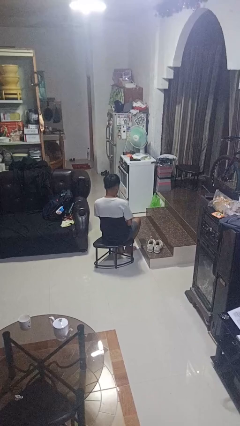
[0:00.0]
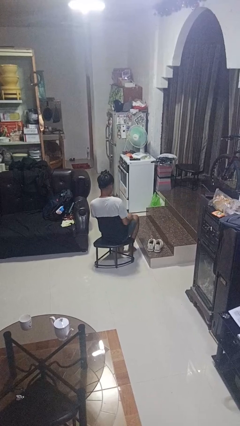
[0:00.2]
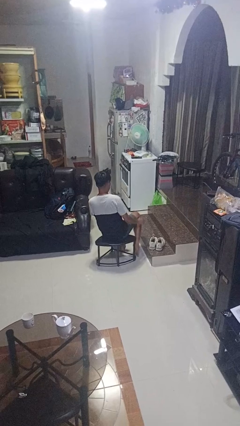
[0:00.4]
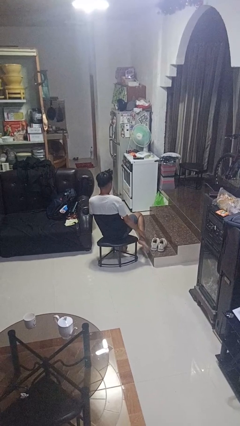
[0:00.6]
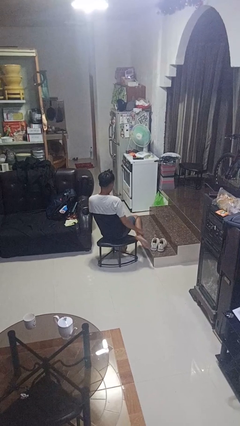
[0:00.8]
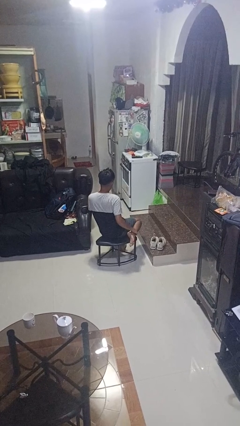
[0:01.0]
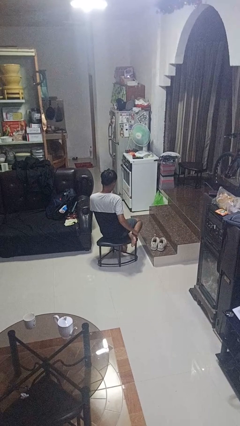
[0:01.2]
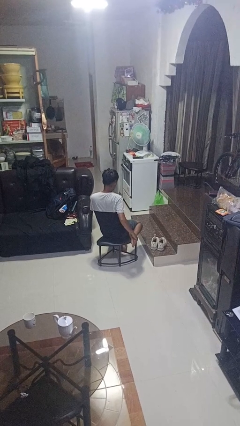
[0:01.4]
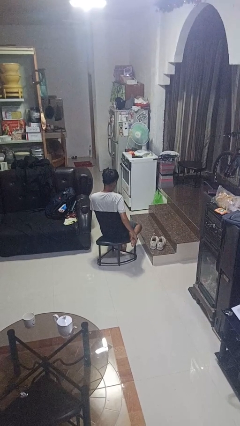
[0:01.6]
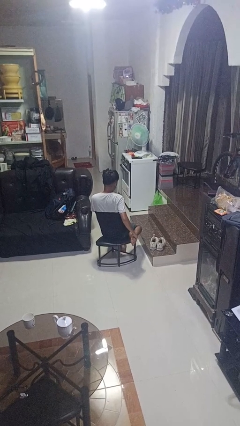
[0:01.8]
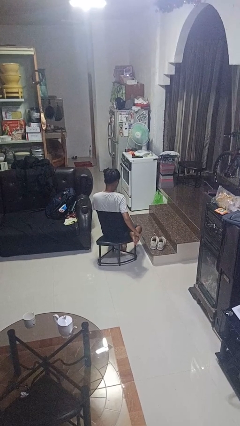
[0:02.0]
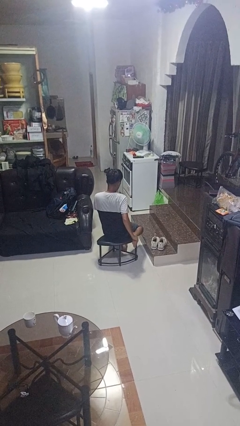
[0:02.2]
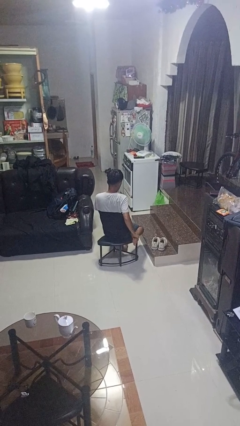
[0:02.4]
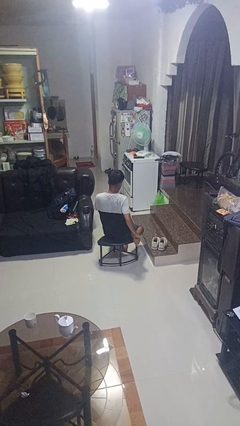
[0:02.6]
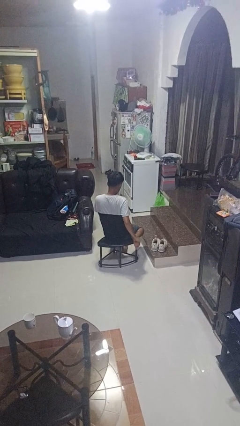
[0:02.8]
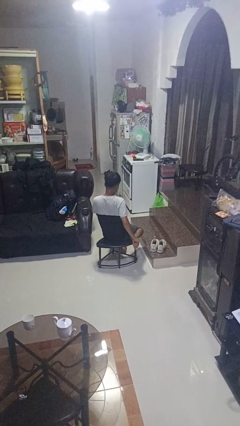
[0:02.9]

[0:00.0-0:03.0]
person rubs foot

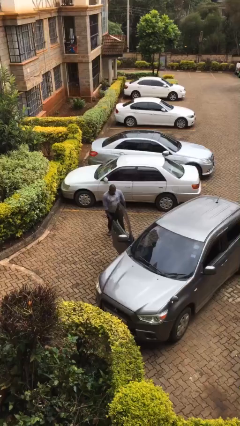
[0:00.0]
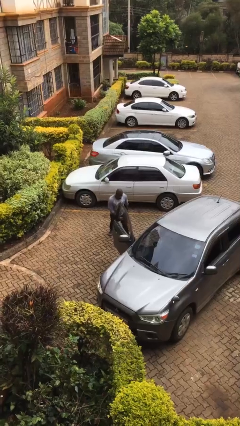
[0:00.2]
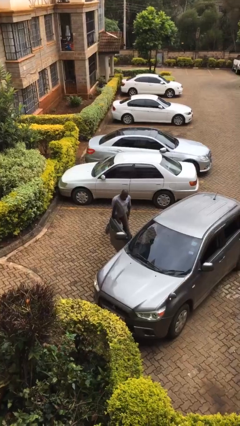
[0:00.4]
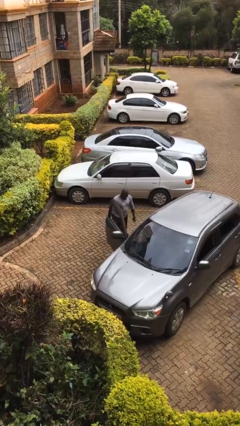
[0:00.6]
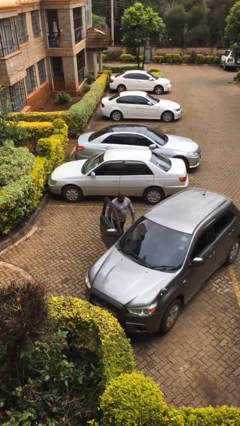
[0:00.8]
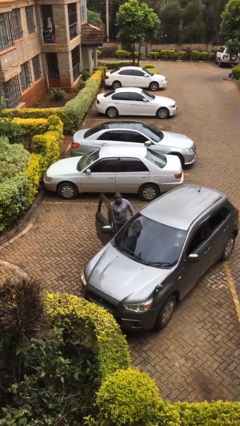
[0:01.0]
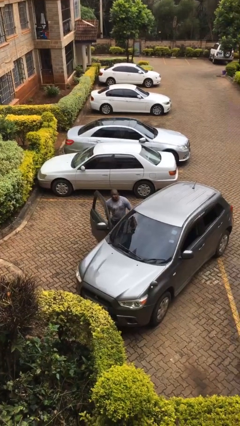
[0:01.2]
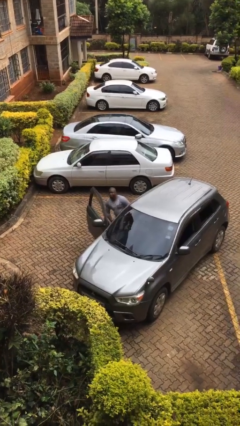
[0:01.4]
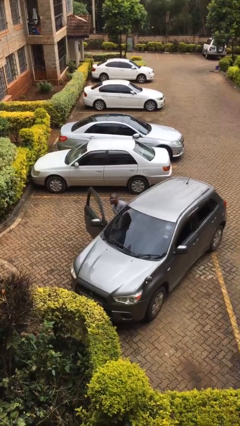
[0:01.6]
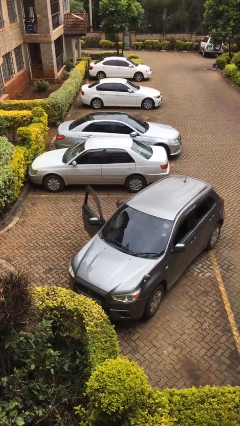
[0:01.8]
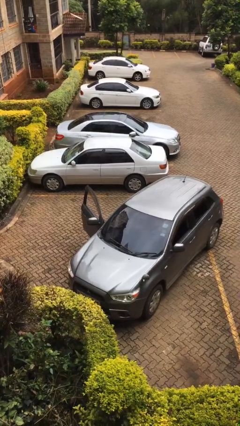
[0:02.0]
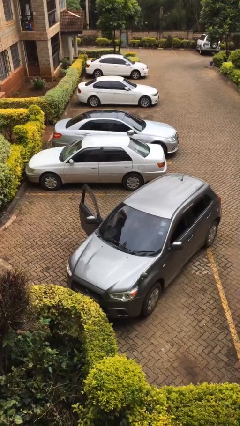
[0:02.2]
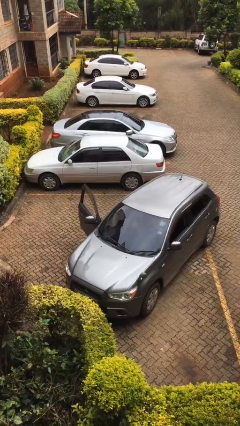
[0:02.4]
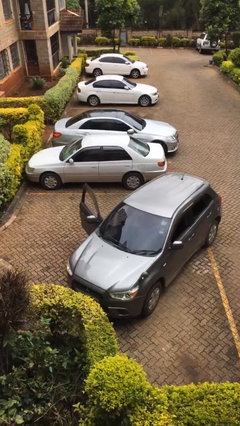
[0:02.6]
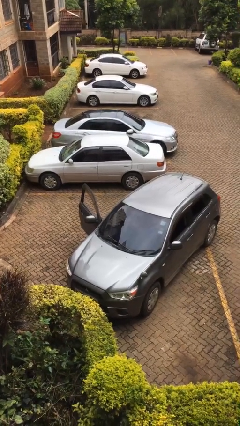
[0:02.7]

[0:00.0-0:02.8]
person enters car

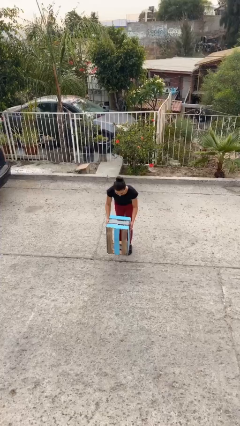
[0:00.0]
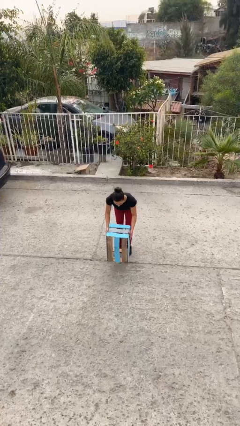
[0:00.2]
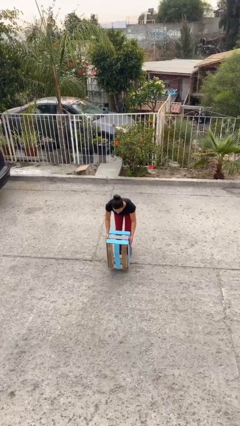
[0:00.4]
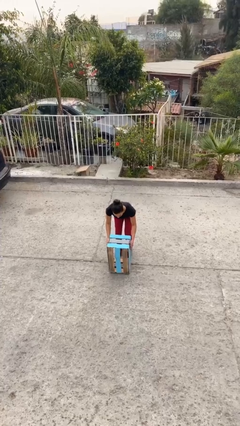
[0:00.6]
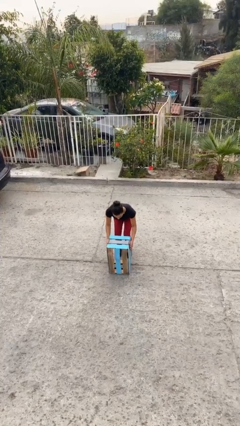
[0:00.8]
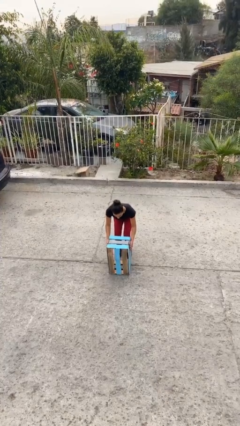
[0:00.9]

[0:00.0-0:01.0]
person puts down object on floor

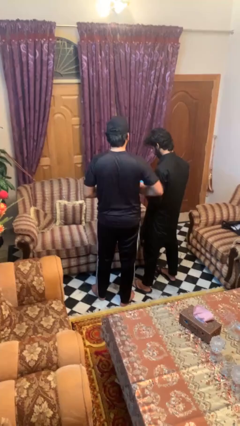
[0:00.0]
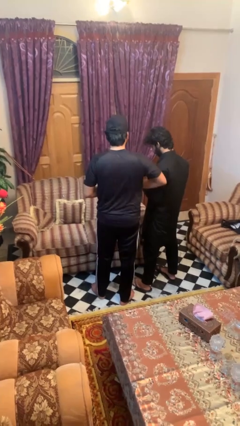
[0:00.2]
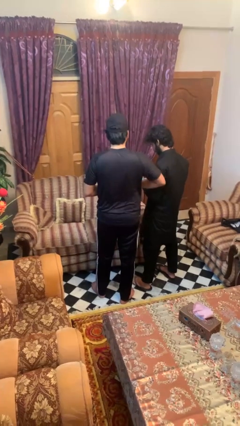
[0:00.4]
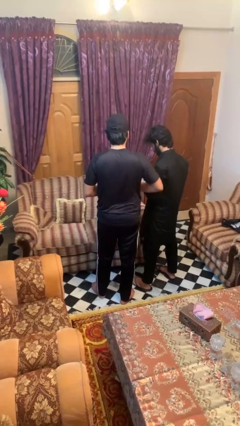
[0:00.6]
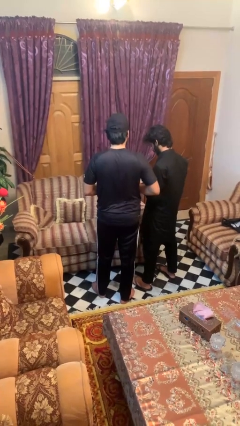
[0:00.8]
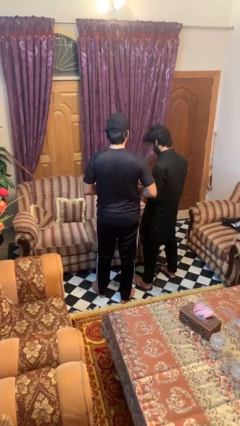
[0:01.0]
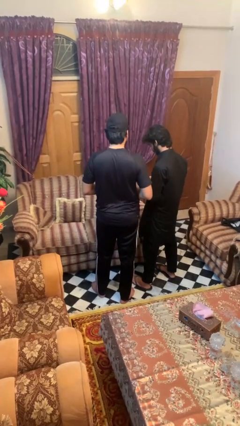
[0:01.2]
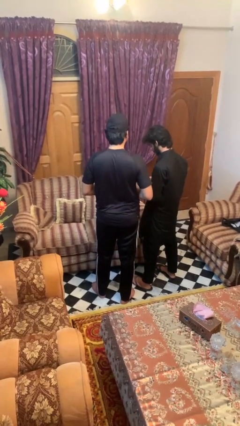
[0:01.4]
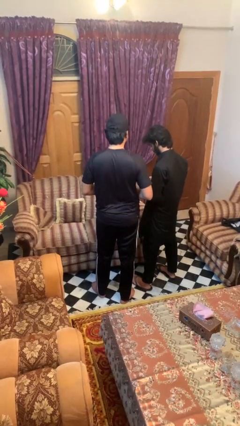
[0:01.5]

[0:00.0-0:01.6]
person nudges person with elbow

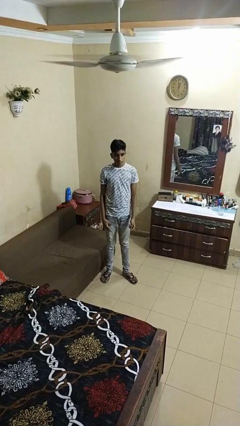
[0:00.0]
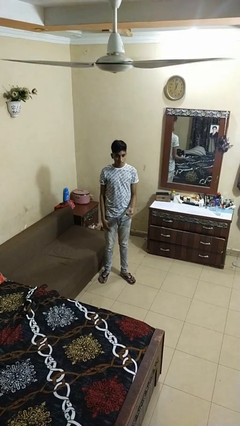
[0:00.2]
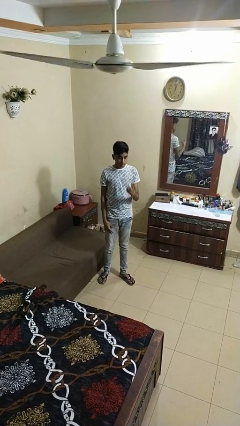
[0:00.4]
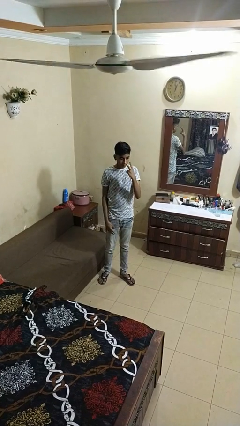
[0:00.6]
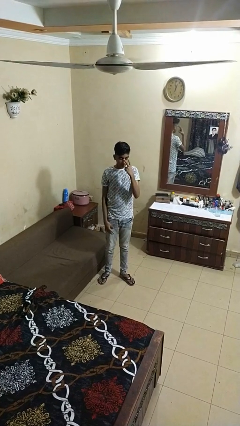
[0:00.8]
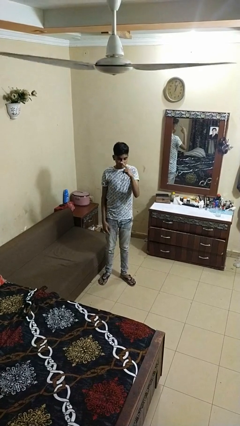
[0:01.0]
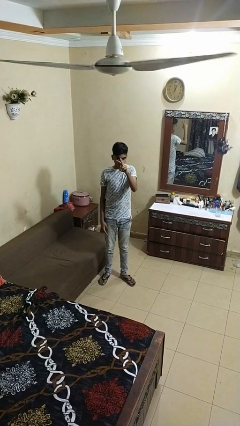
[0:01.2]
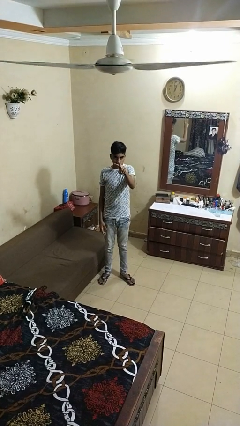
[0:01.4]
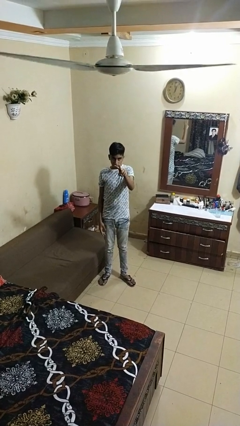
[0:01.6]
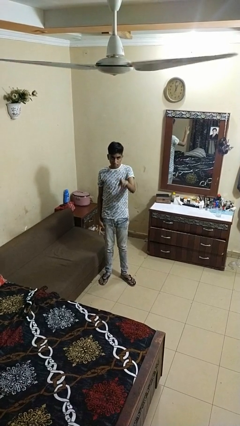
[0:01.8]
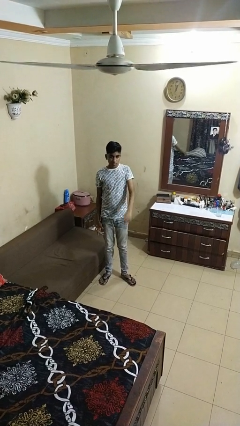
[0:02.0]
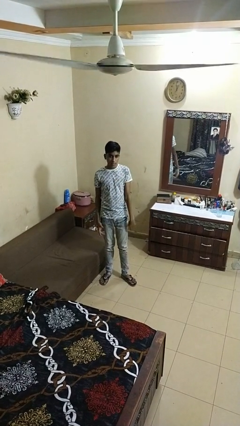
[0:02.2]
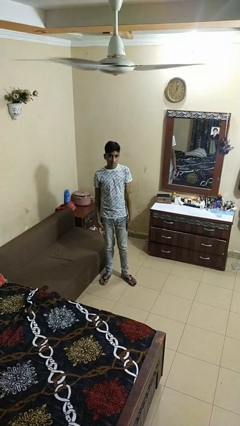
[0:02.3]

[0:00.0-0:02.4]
person gestures watch closely

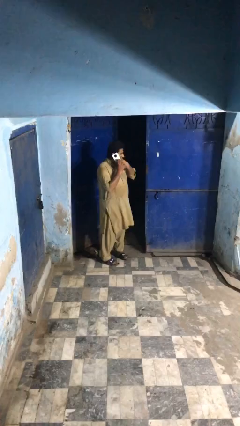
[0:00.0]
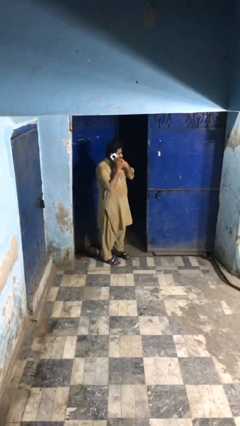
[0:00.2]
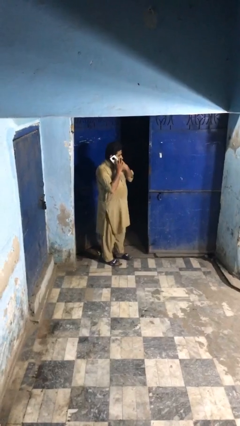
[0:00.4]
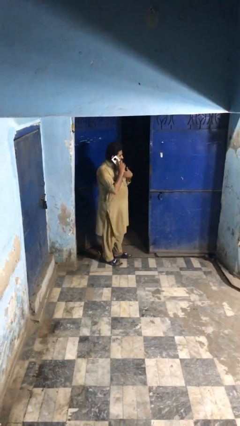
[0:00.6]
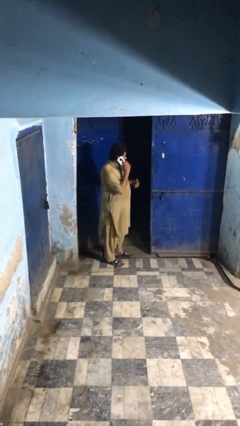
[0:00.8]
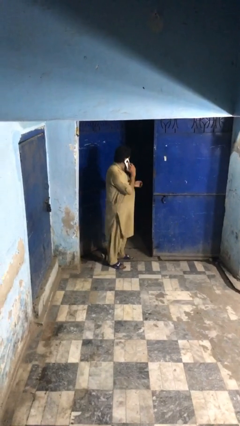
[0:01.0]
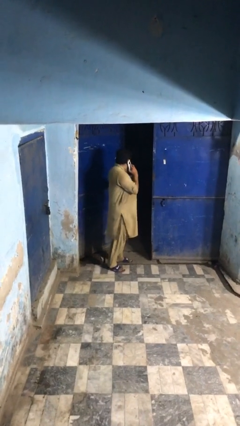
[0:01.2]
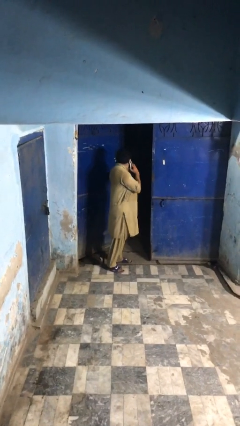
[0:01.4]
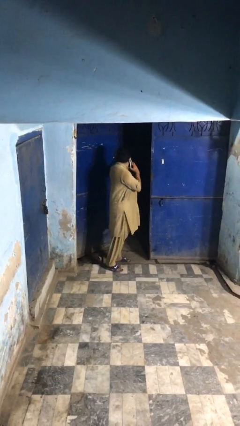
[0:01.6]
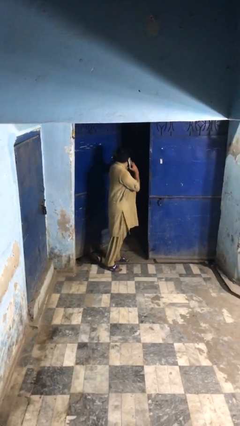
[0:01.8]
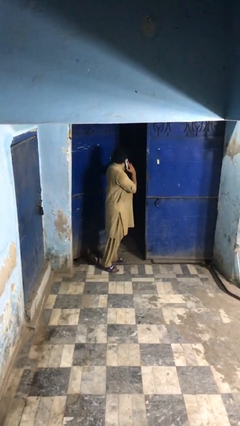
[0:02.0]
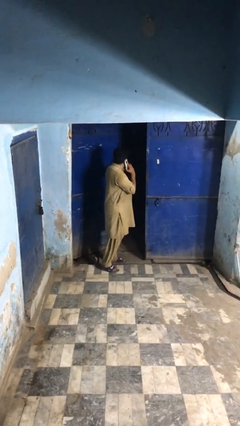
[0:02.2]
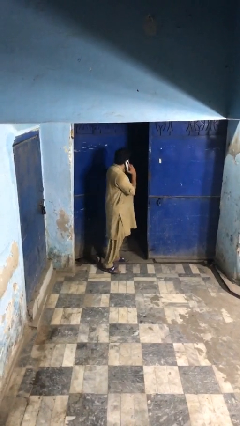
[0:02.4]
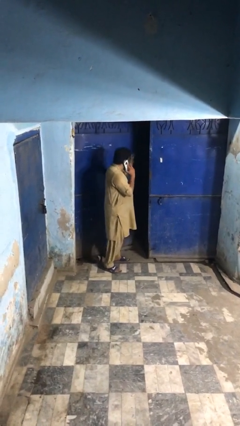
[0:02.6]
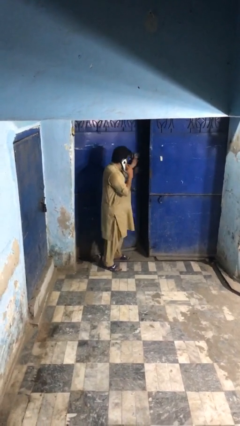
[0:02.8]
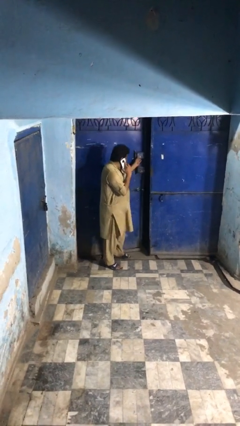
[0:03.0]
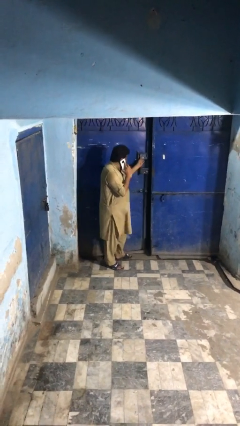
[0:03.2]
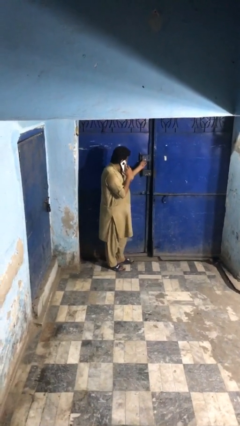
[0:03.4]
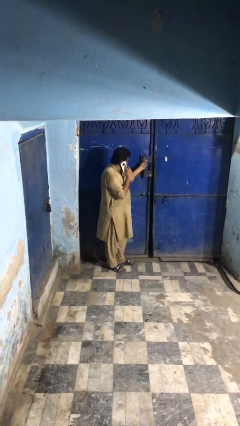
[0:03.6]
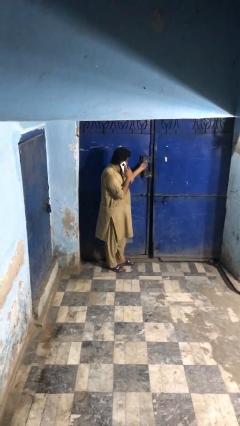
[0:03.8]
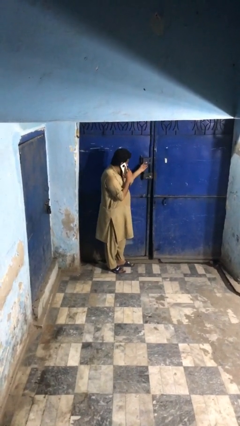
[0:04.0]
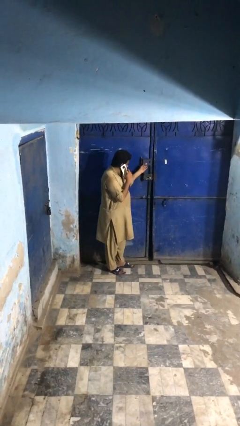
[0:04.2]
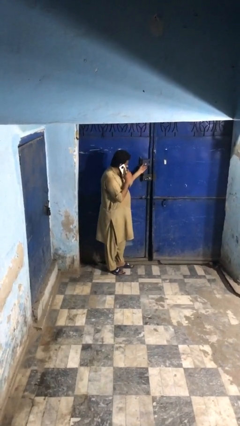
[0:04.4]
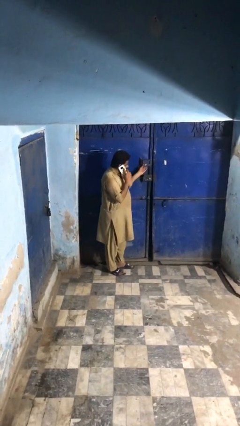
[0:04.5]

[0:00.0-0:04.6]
person closes facility door

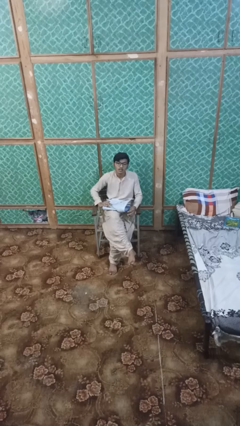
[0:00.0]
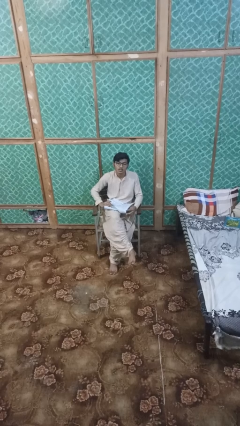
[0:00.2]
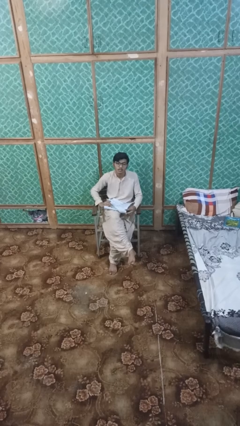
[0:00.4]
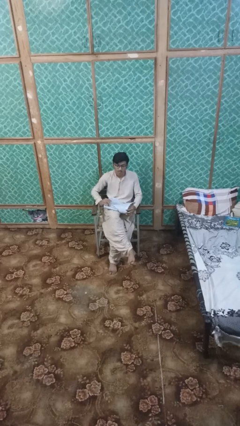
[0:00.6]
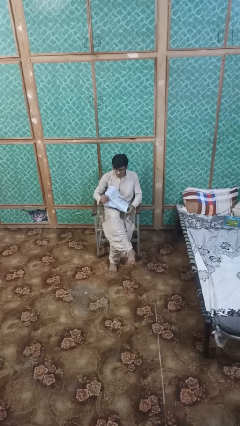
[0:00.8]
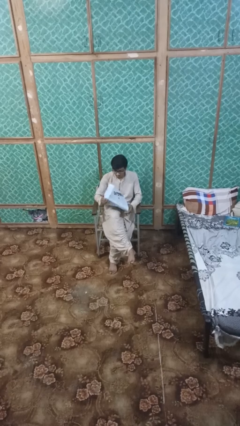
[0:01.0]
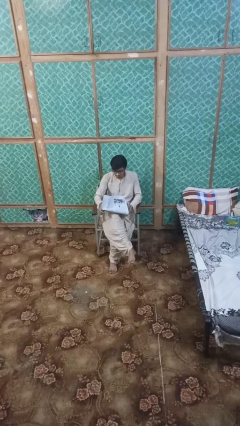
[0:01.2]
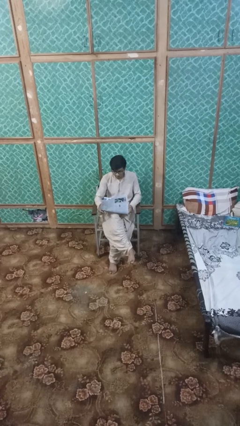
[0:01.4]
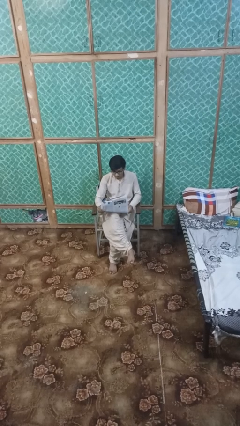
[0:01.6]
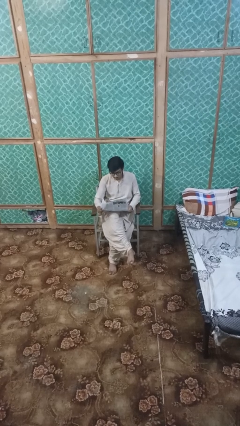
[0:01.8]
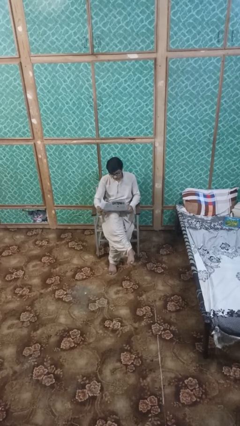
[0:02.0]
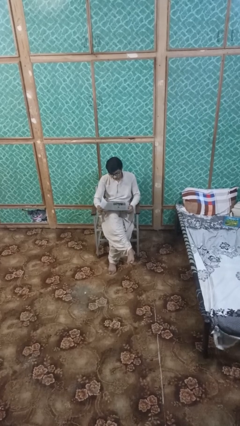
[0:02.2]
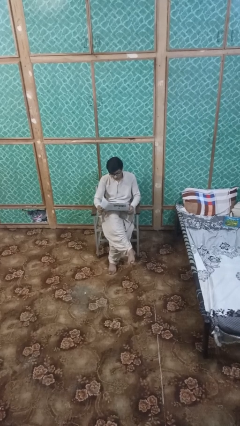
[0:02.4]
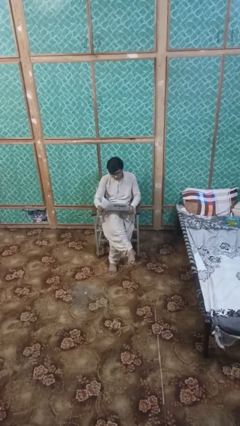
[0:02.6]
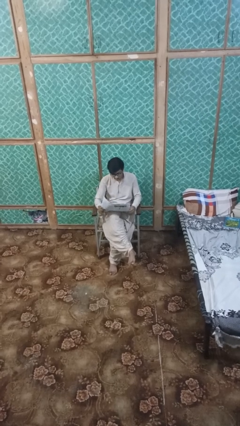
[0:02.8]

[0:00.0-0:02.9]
person reads newspaper
